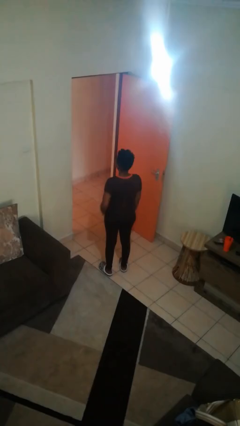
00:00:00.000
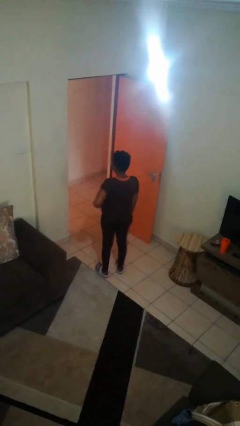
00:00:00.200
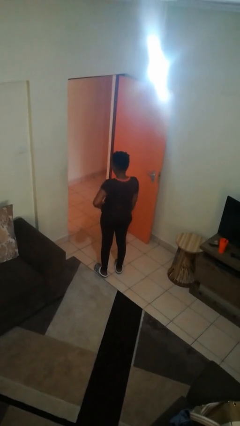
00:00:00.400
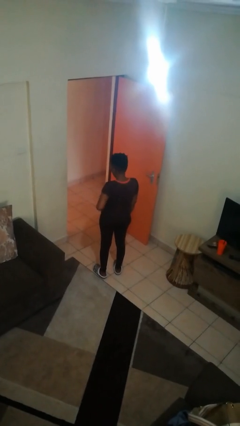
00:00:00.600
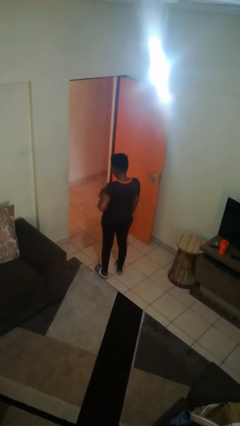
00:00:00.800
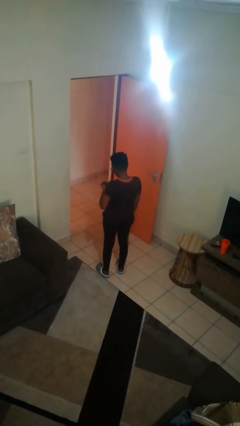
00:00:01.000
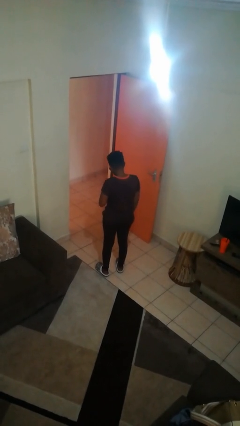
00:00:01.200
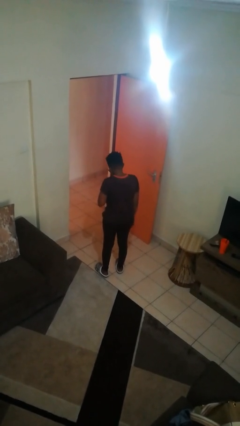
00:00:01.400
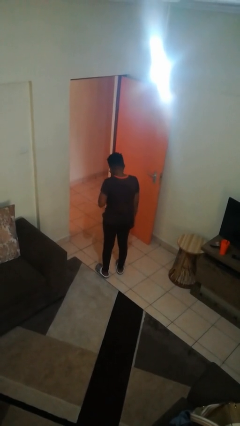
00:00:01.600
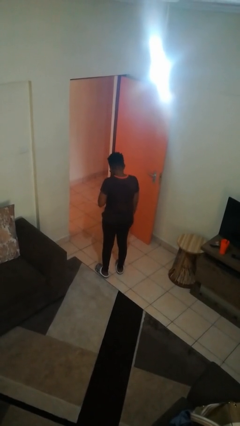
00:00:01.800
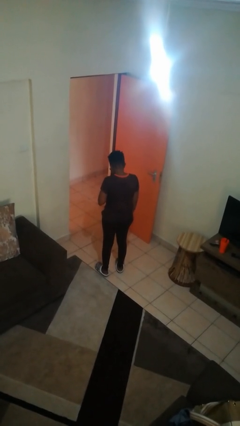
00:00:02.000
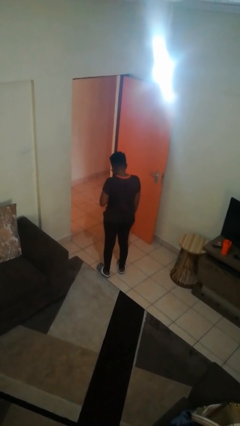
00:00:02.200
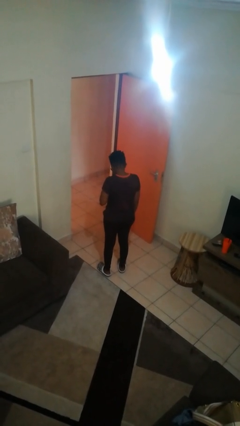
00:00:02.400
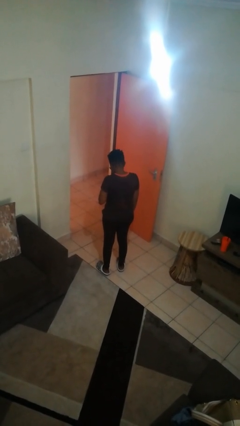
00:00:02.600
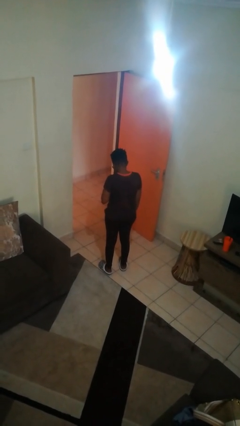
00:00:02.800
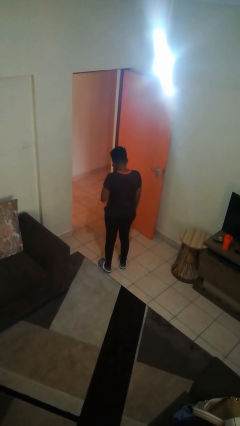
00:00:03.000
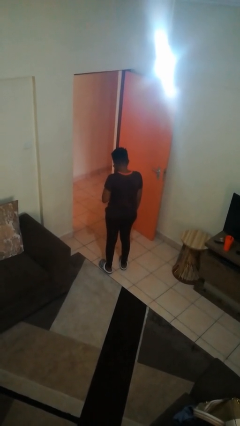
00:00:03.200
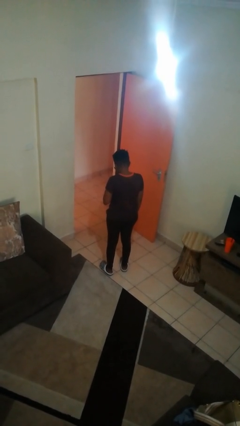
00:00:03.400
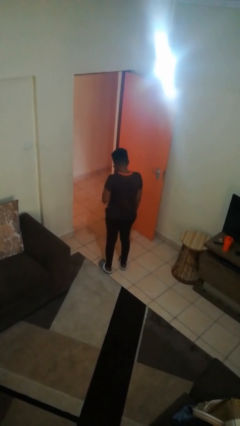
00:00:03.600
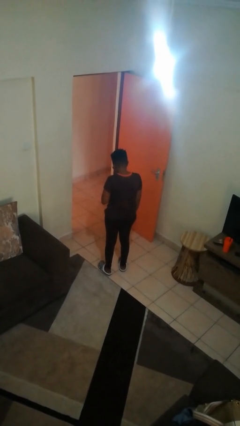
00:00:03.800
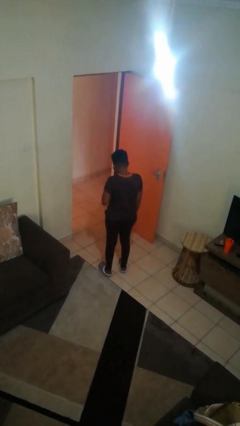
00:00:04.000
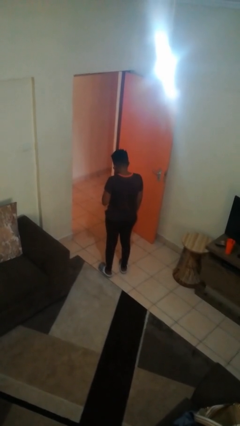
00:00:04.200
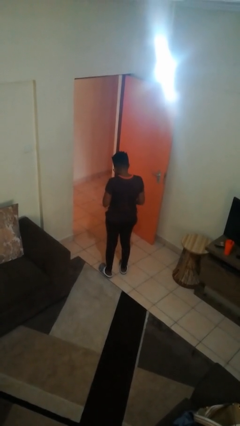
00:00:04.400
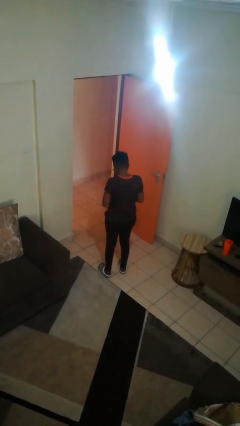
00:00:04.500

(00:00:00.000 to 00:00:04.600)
person takes phone from pocket

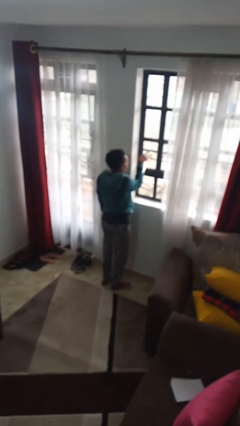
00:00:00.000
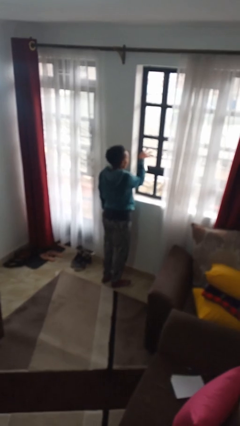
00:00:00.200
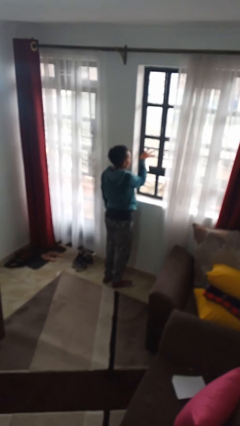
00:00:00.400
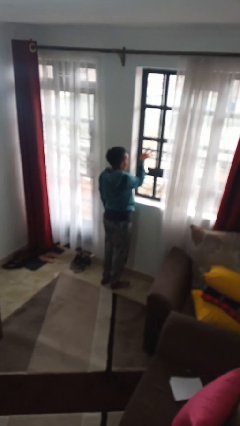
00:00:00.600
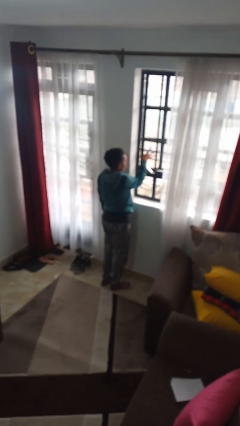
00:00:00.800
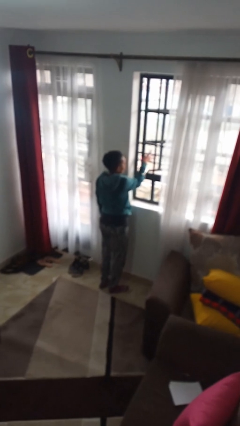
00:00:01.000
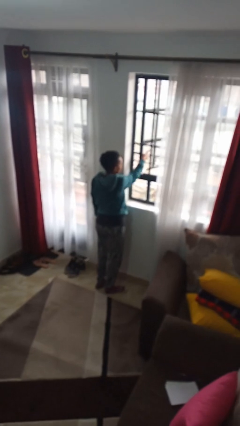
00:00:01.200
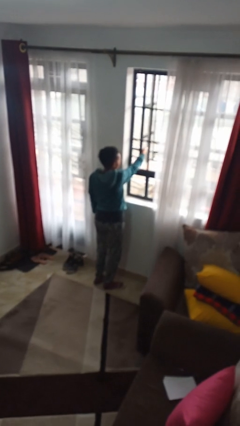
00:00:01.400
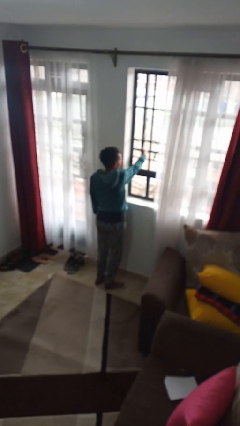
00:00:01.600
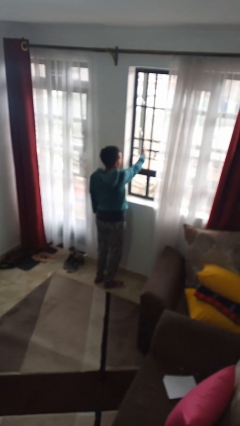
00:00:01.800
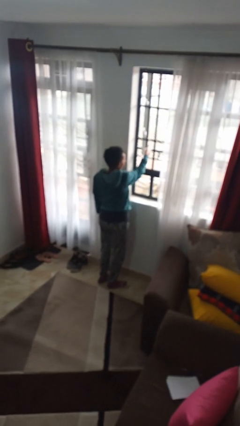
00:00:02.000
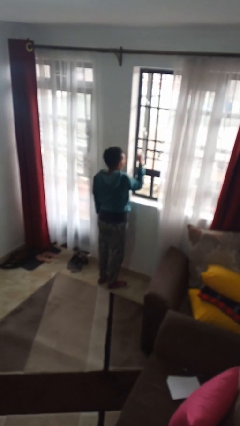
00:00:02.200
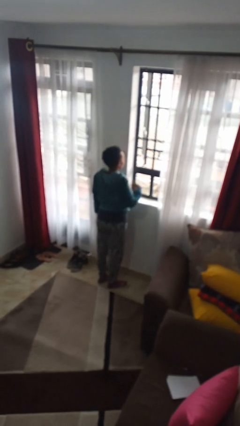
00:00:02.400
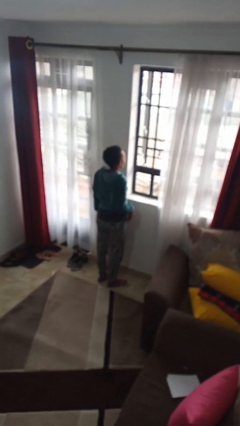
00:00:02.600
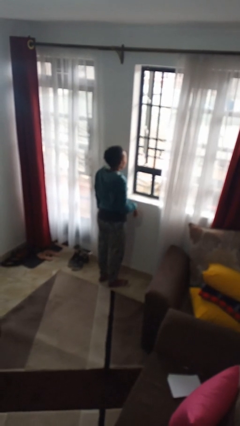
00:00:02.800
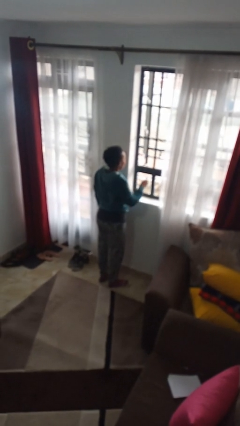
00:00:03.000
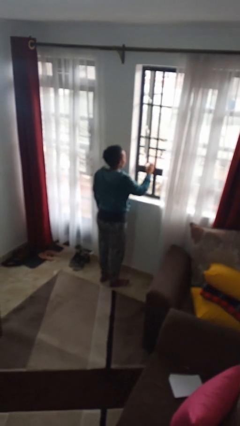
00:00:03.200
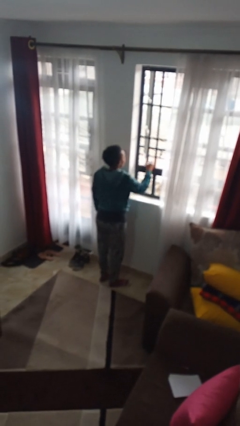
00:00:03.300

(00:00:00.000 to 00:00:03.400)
person opens home window

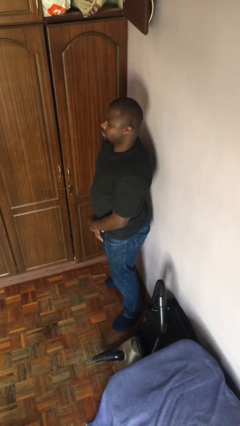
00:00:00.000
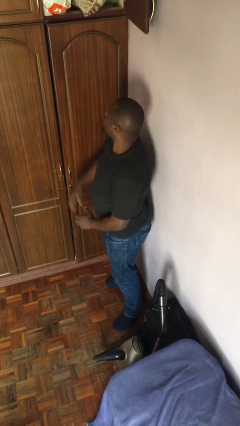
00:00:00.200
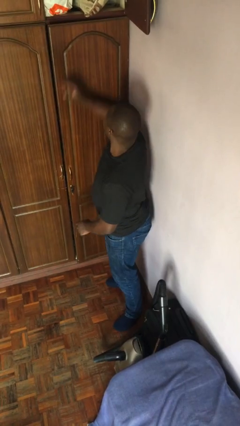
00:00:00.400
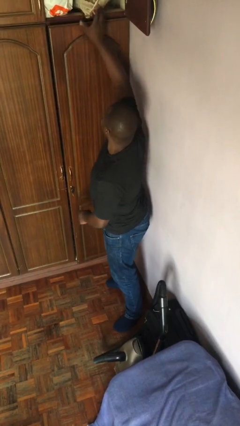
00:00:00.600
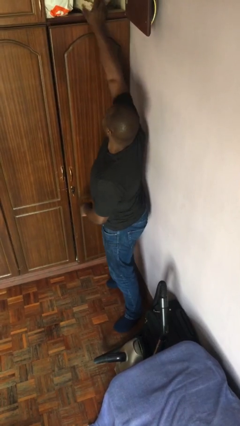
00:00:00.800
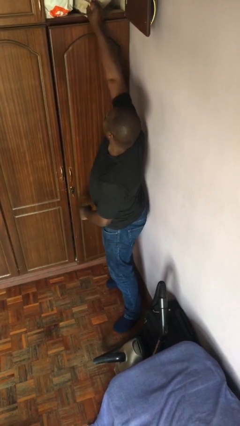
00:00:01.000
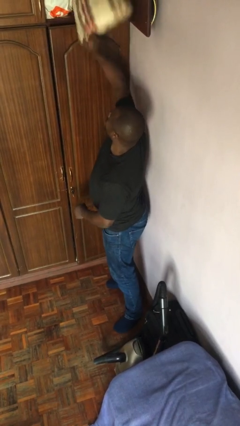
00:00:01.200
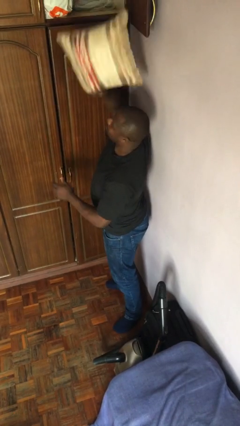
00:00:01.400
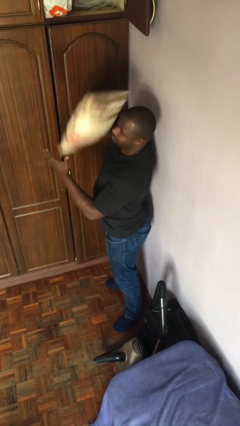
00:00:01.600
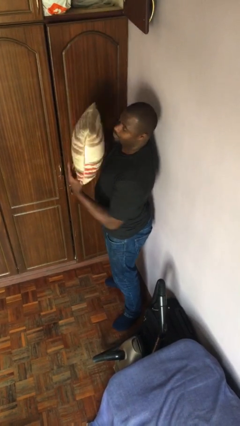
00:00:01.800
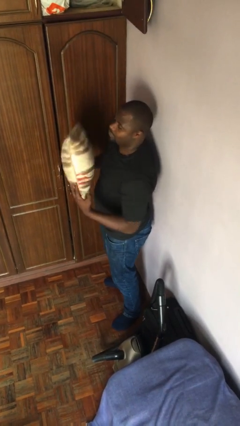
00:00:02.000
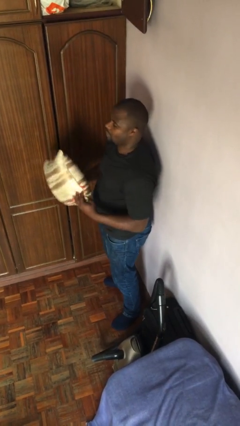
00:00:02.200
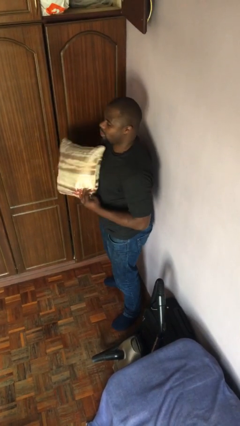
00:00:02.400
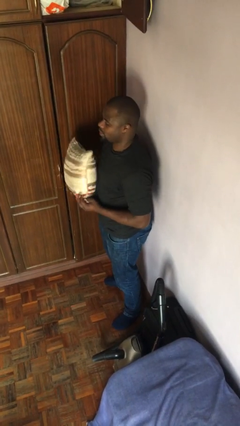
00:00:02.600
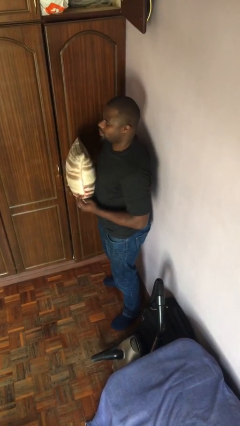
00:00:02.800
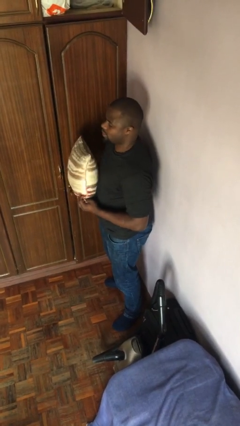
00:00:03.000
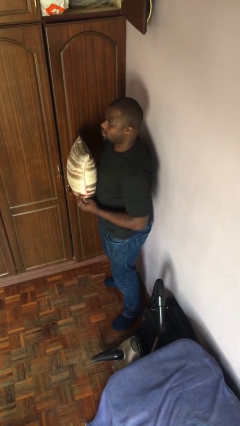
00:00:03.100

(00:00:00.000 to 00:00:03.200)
person picks up object from shelf

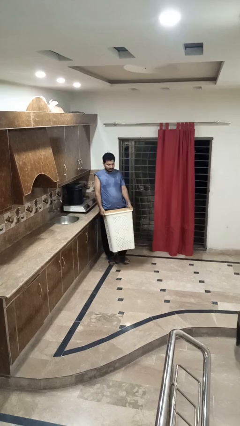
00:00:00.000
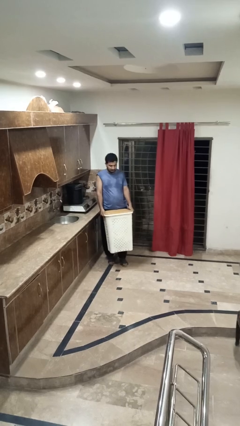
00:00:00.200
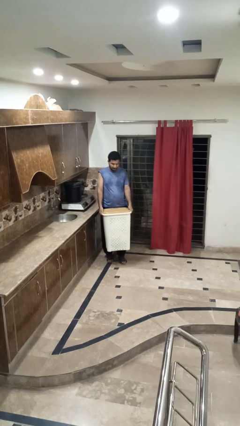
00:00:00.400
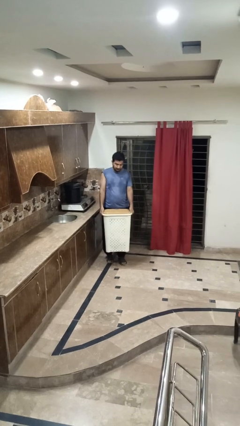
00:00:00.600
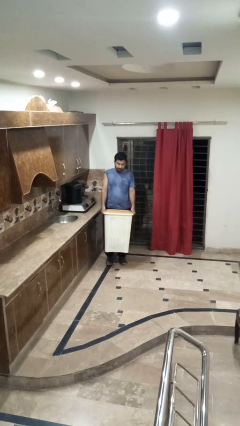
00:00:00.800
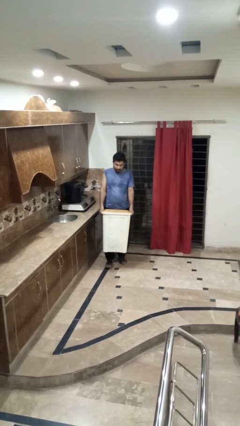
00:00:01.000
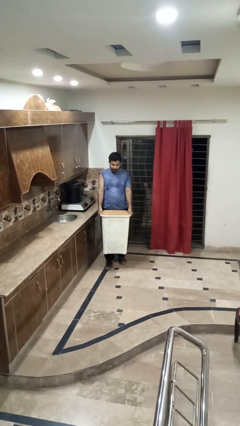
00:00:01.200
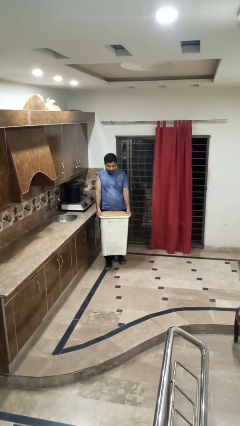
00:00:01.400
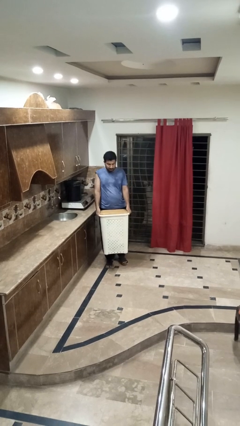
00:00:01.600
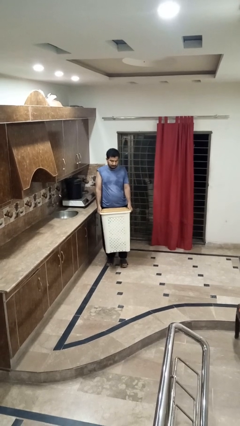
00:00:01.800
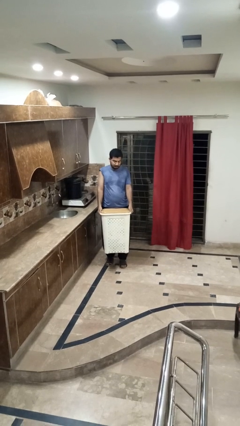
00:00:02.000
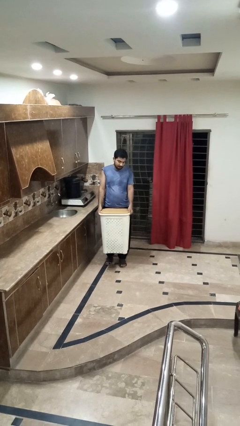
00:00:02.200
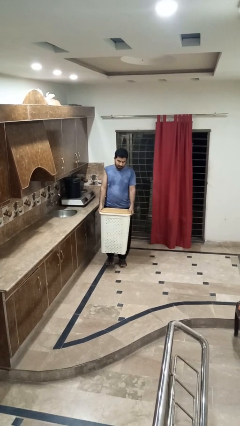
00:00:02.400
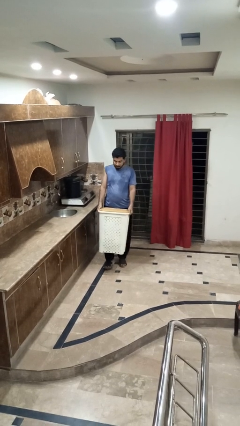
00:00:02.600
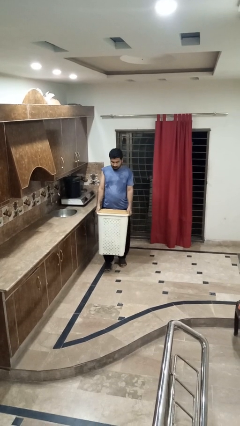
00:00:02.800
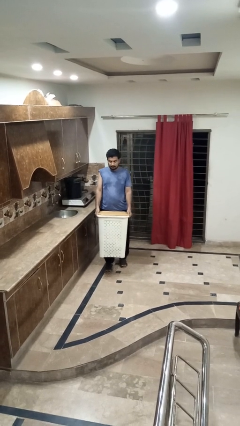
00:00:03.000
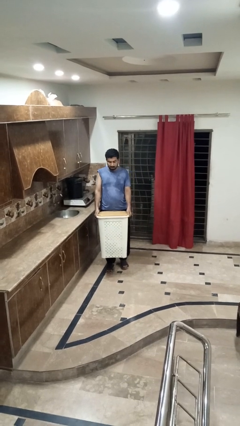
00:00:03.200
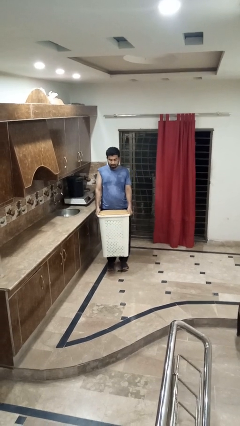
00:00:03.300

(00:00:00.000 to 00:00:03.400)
person carries laundry basket

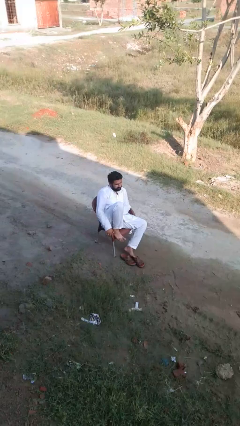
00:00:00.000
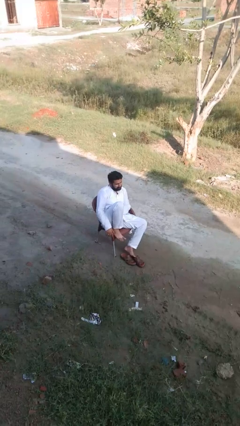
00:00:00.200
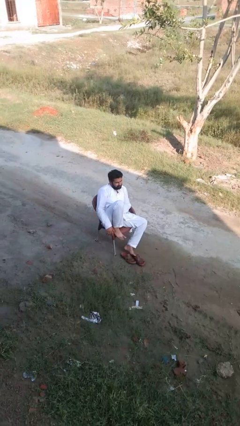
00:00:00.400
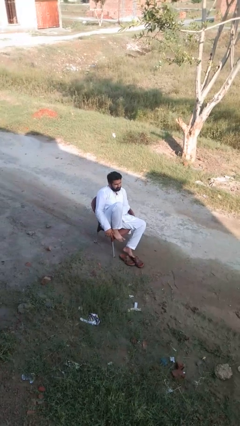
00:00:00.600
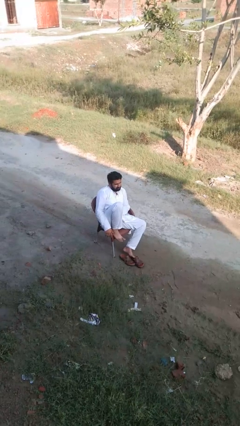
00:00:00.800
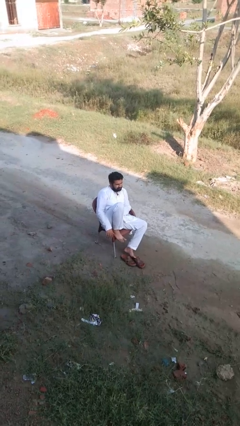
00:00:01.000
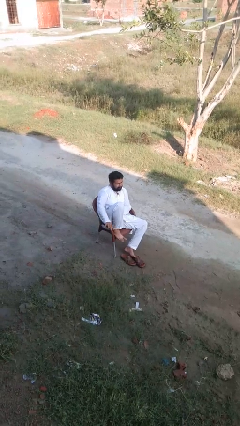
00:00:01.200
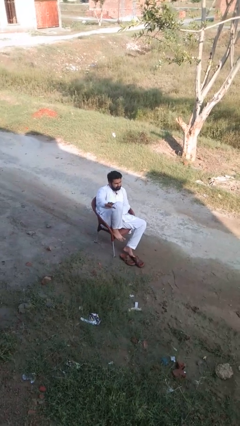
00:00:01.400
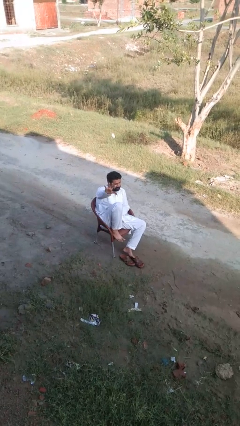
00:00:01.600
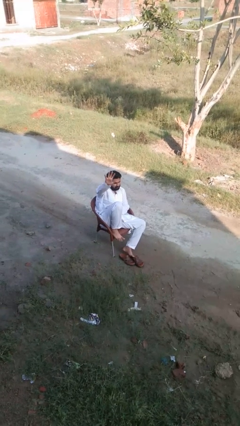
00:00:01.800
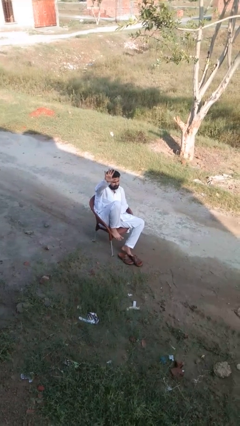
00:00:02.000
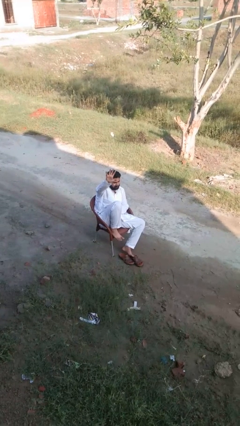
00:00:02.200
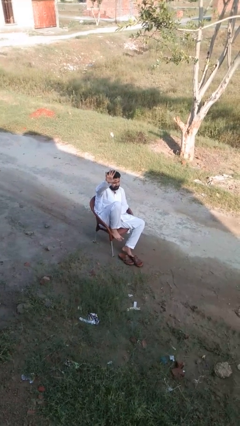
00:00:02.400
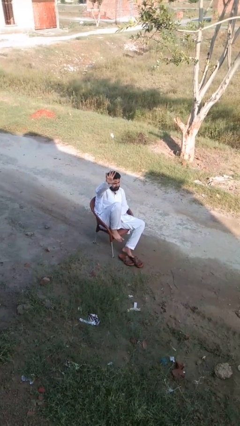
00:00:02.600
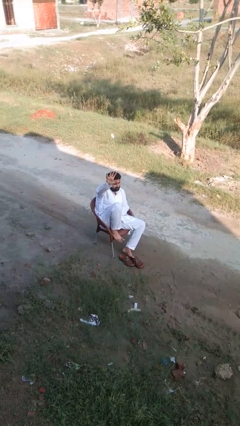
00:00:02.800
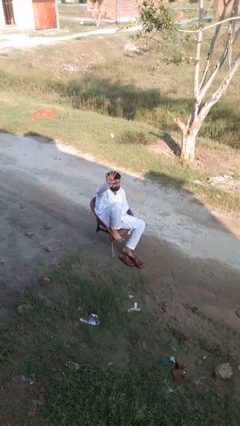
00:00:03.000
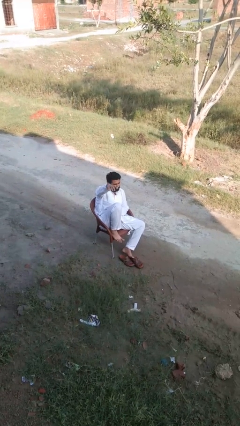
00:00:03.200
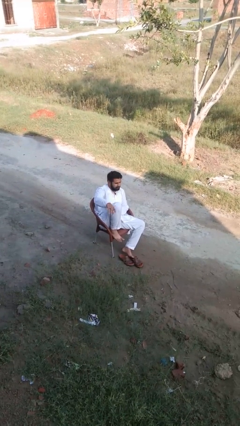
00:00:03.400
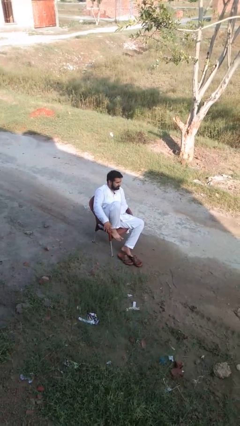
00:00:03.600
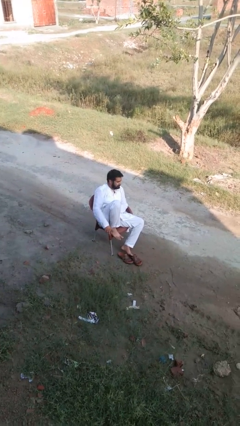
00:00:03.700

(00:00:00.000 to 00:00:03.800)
person gestures number five
